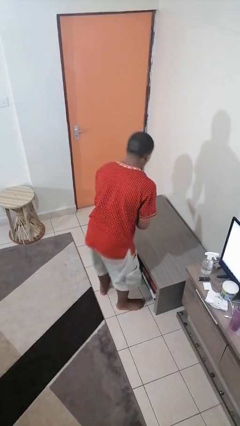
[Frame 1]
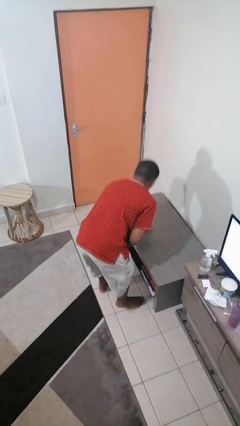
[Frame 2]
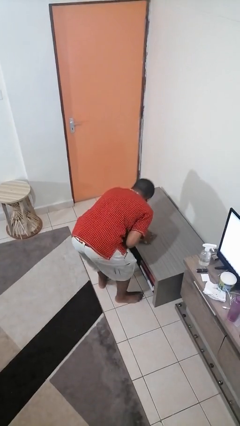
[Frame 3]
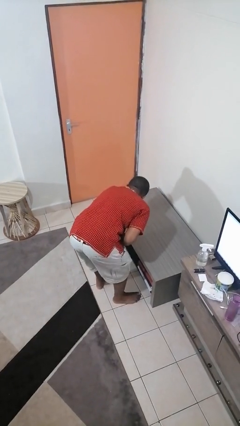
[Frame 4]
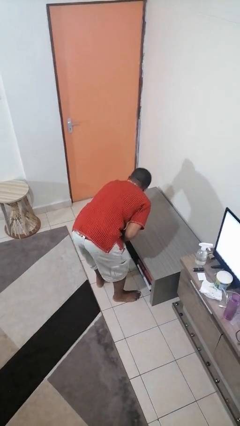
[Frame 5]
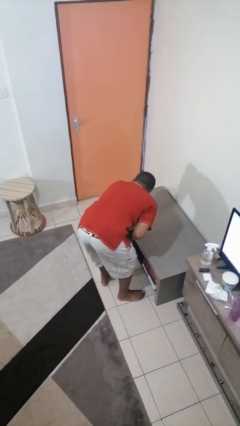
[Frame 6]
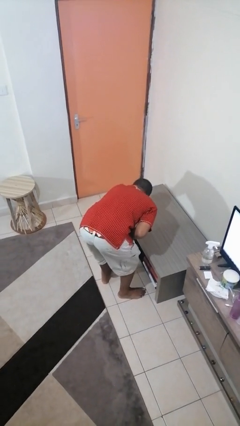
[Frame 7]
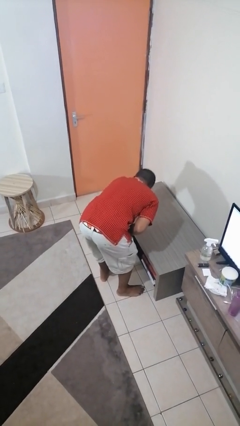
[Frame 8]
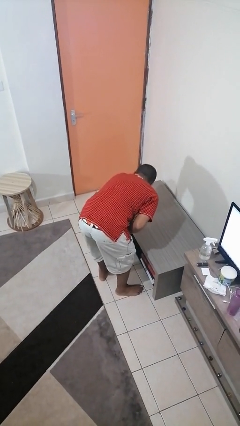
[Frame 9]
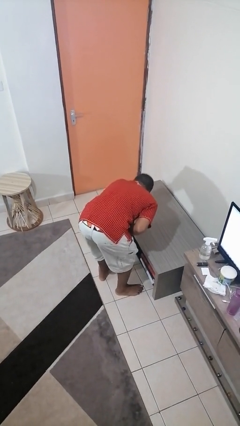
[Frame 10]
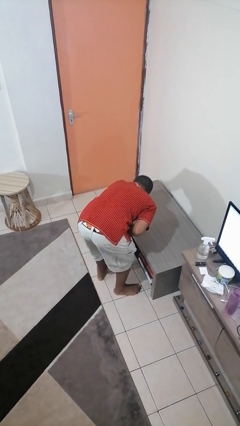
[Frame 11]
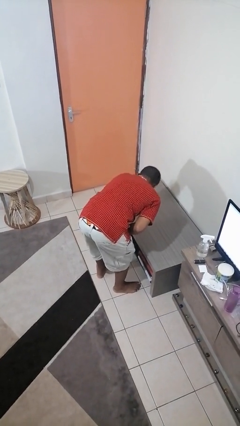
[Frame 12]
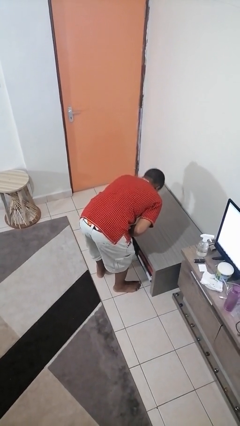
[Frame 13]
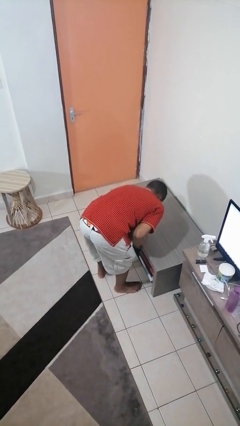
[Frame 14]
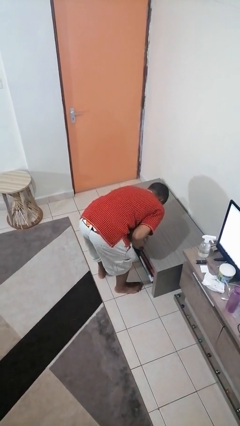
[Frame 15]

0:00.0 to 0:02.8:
person cleans table with rag

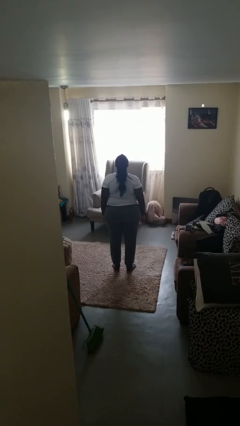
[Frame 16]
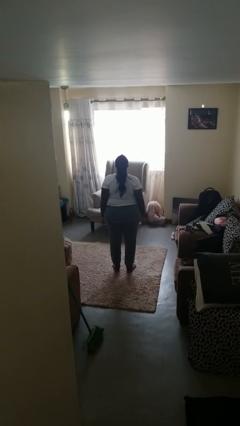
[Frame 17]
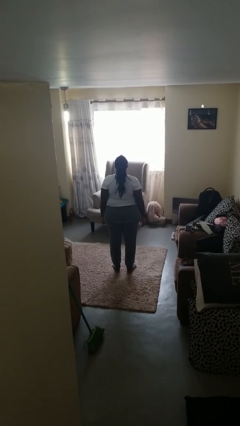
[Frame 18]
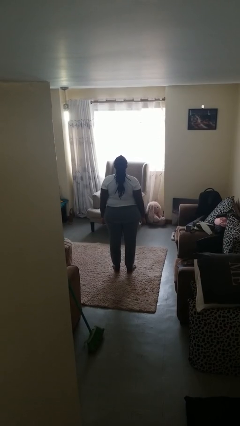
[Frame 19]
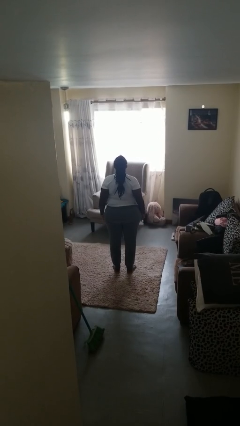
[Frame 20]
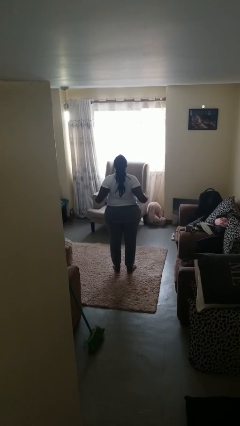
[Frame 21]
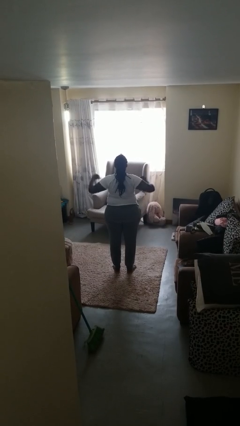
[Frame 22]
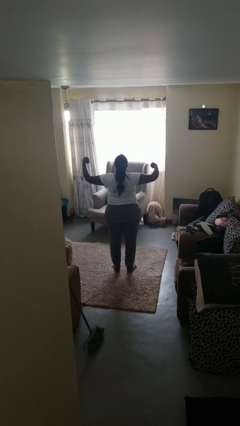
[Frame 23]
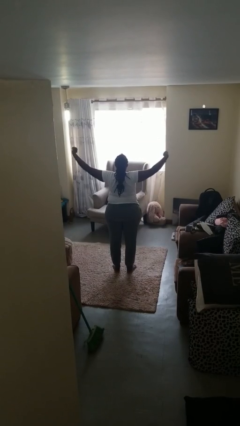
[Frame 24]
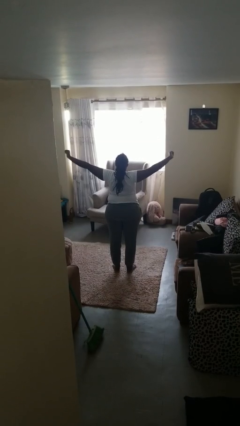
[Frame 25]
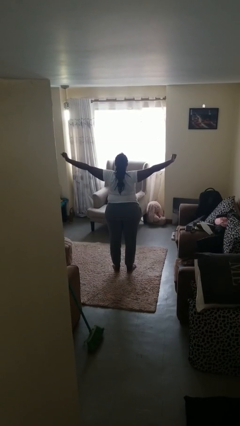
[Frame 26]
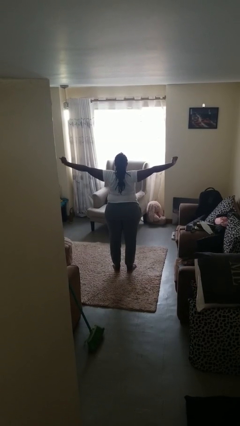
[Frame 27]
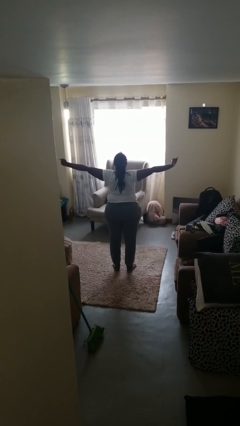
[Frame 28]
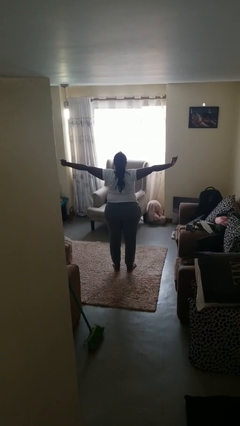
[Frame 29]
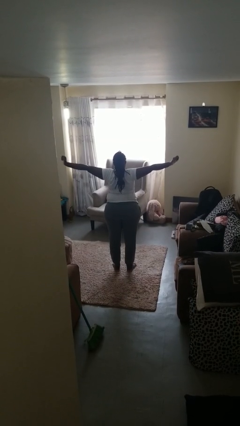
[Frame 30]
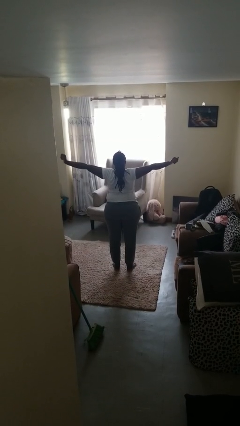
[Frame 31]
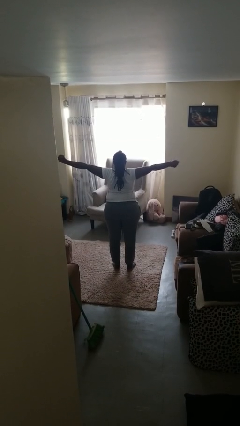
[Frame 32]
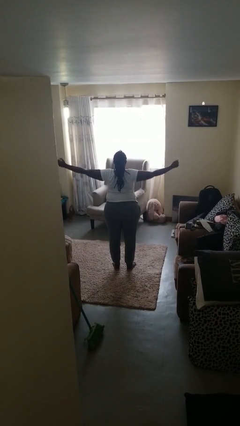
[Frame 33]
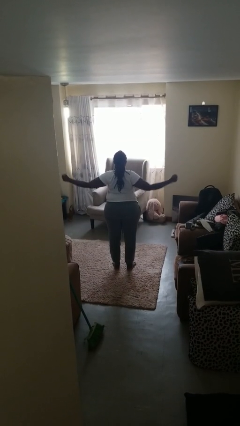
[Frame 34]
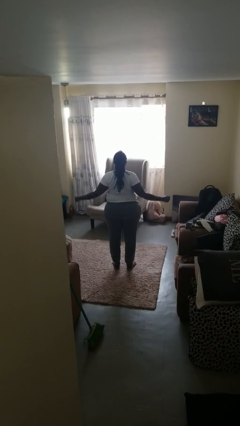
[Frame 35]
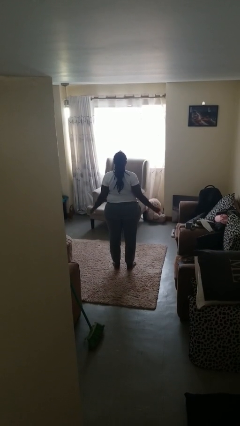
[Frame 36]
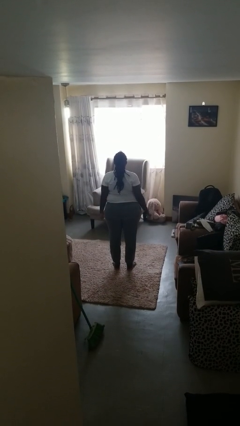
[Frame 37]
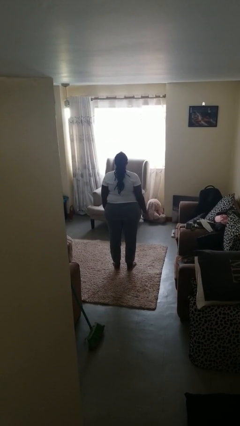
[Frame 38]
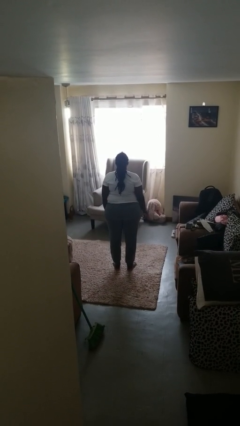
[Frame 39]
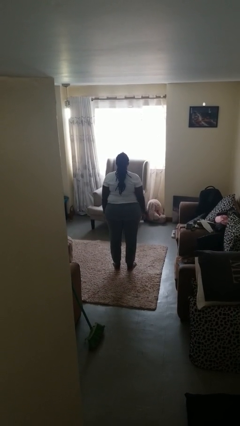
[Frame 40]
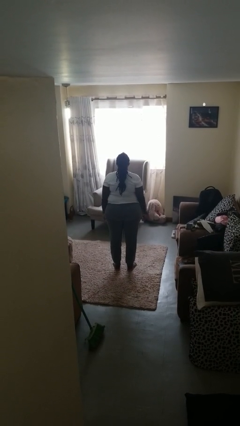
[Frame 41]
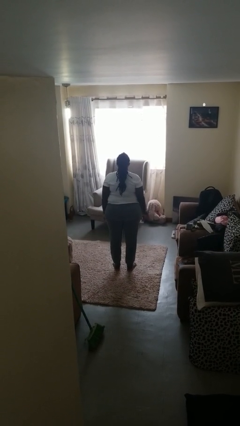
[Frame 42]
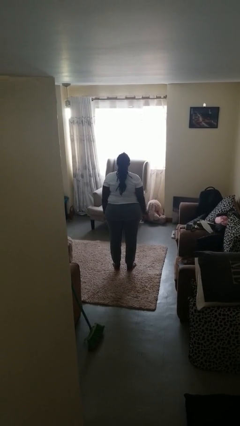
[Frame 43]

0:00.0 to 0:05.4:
person stretches arms to side

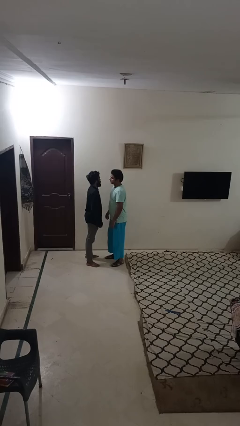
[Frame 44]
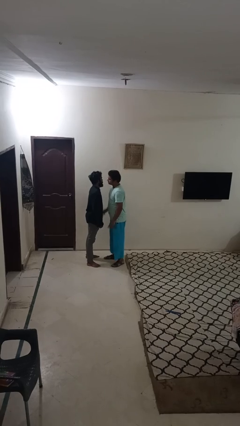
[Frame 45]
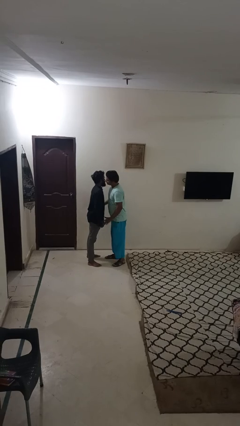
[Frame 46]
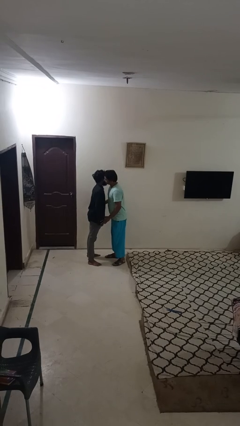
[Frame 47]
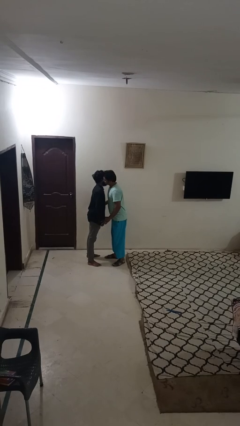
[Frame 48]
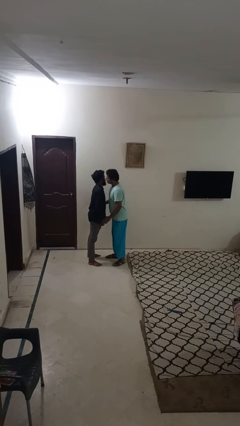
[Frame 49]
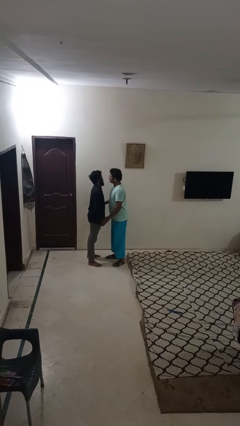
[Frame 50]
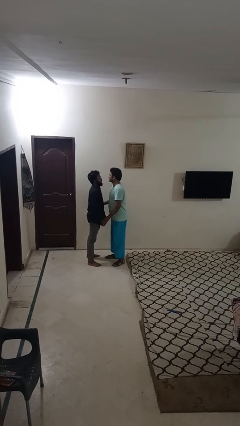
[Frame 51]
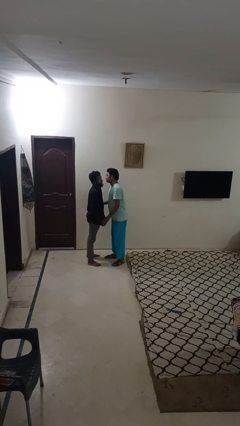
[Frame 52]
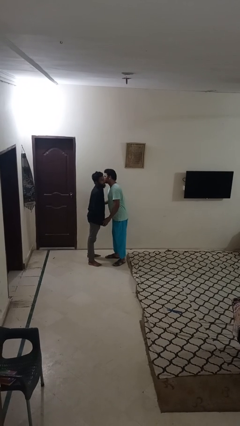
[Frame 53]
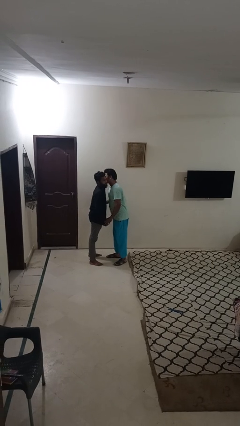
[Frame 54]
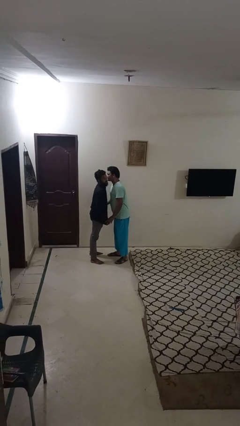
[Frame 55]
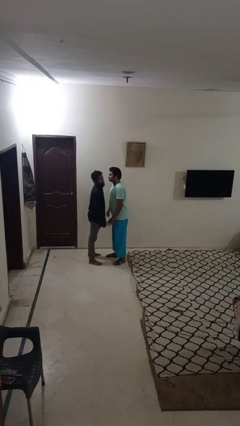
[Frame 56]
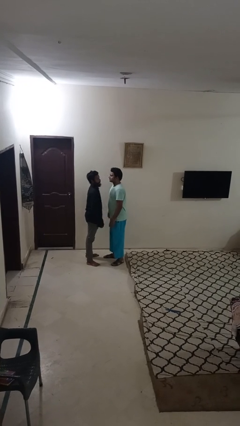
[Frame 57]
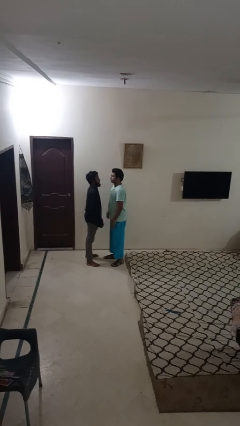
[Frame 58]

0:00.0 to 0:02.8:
person kisses cheek of person

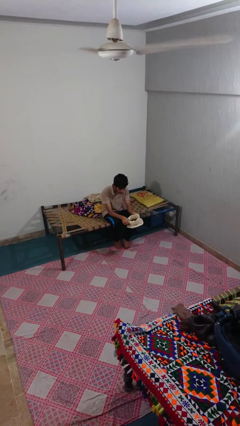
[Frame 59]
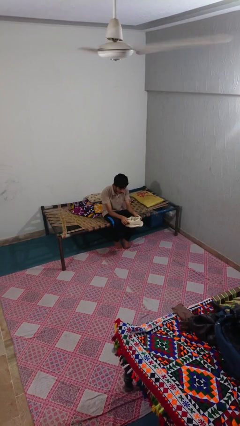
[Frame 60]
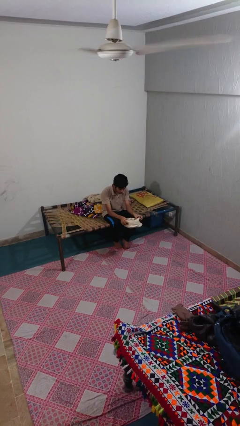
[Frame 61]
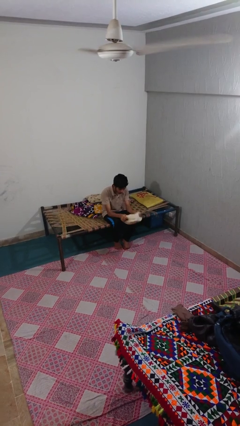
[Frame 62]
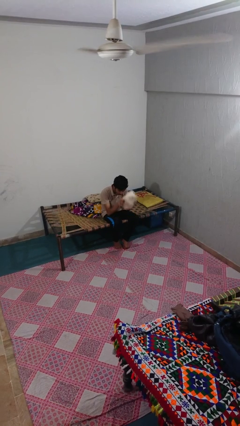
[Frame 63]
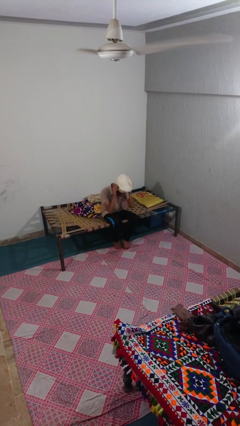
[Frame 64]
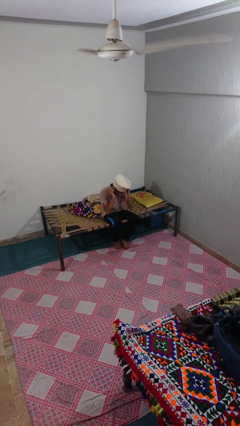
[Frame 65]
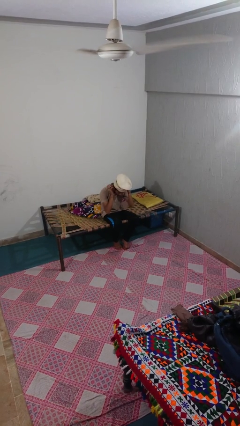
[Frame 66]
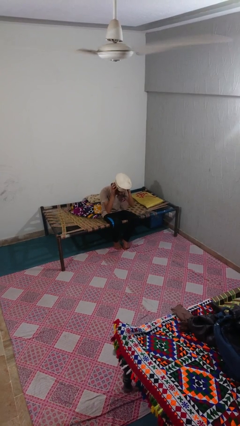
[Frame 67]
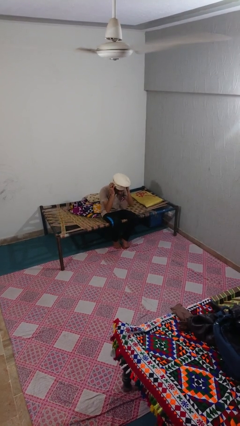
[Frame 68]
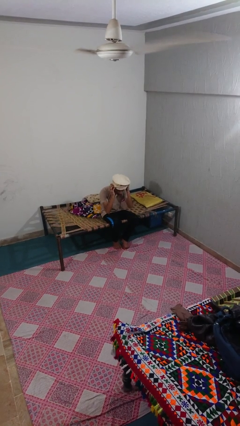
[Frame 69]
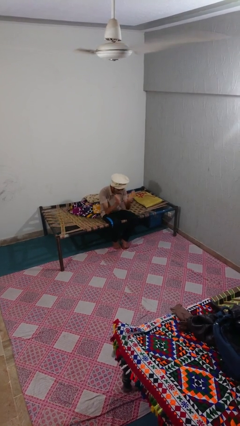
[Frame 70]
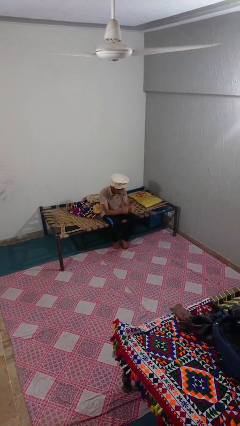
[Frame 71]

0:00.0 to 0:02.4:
person puts on hat

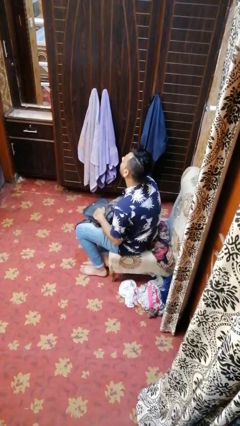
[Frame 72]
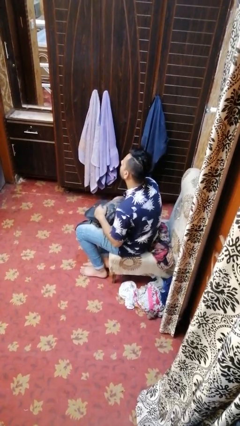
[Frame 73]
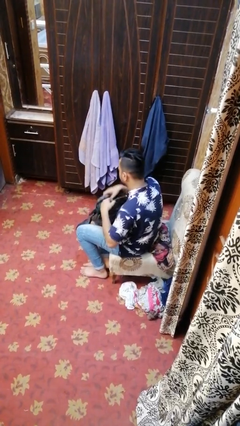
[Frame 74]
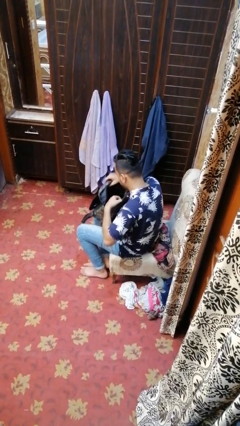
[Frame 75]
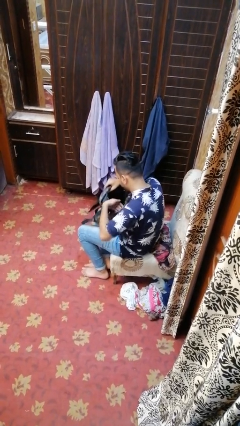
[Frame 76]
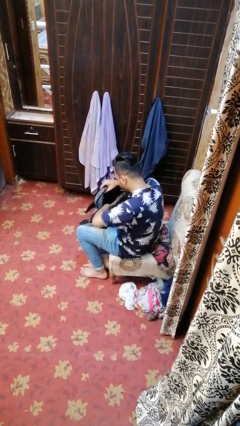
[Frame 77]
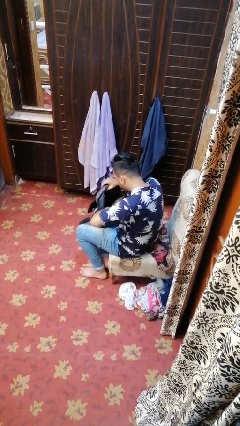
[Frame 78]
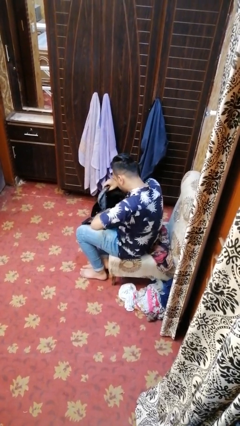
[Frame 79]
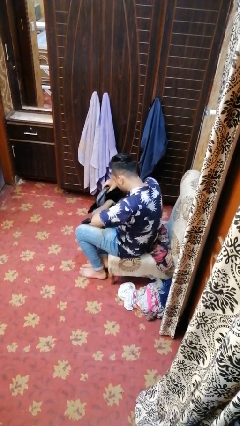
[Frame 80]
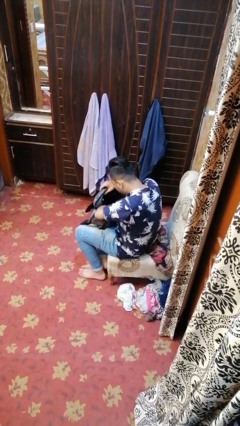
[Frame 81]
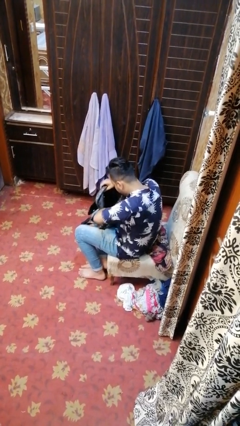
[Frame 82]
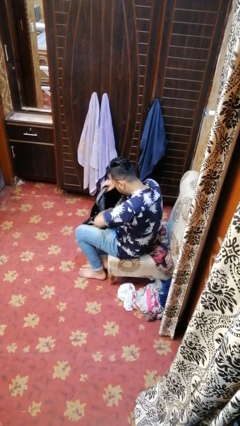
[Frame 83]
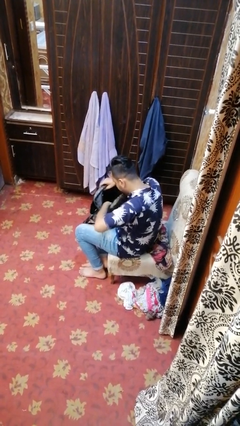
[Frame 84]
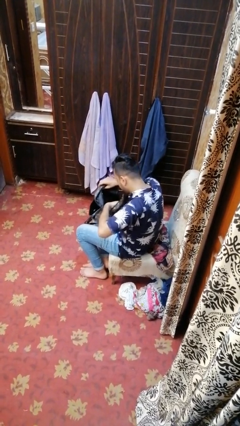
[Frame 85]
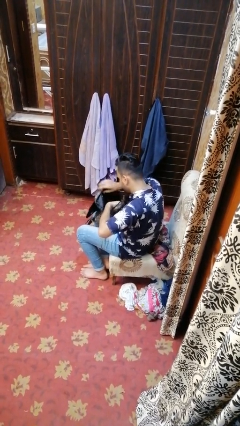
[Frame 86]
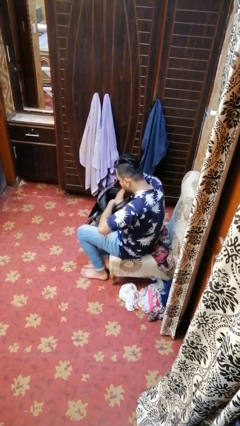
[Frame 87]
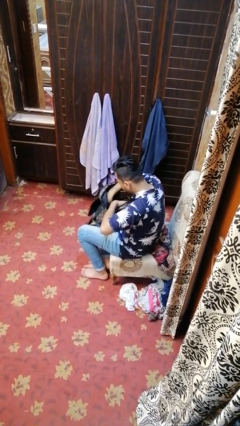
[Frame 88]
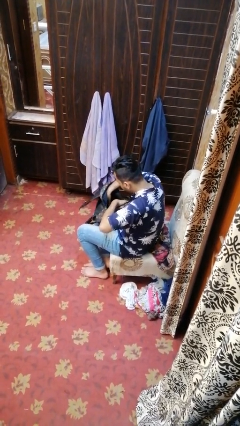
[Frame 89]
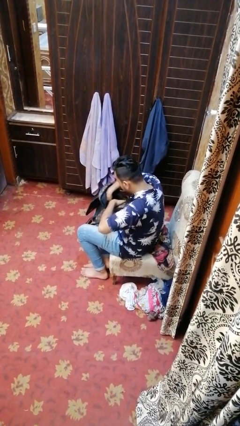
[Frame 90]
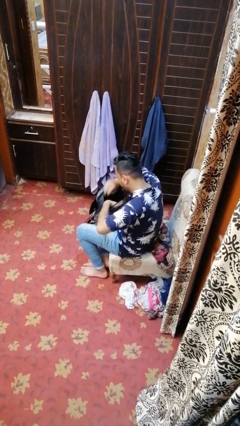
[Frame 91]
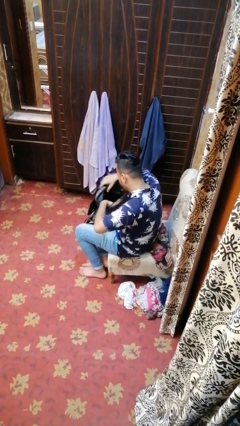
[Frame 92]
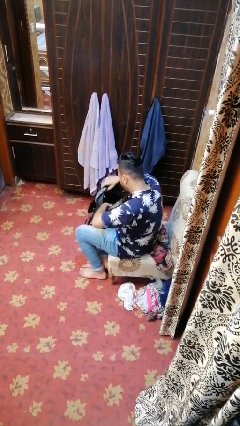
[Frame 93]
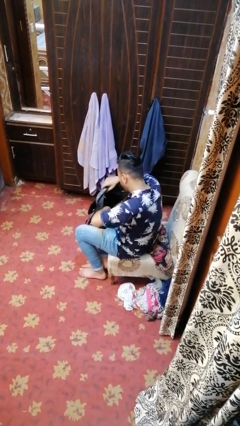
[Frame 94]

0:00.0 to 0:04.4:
person searches in backpack
